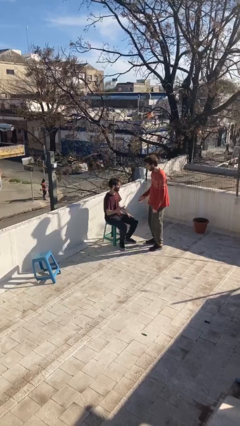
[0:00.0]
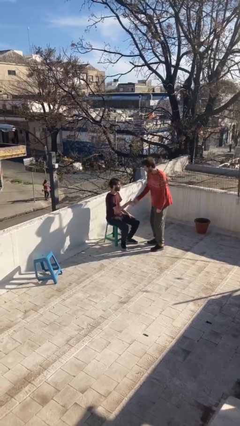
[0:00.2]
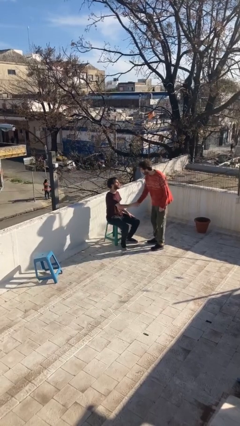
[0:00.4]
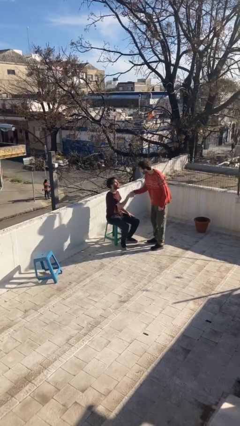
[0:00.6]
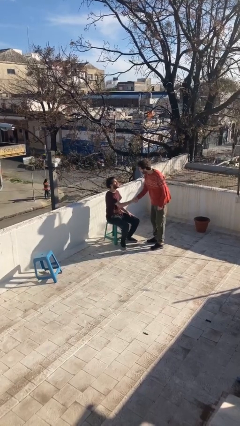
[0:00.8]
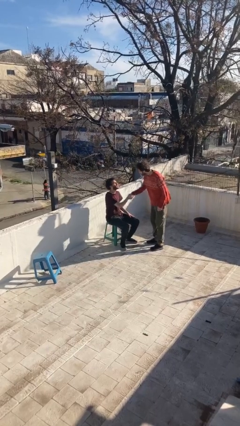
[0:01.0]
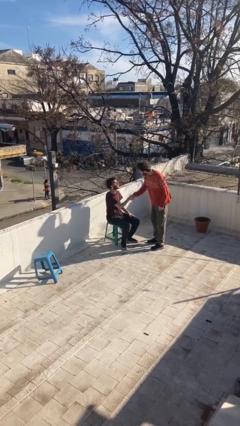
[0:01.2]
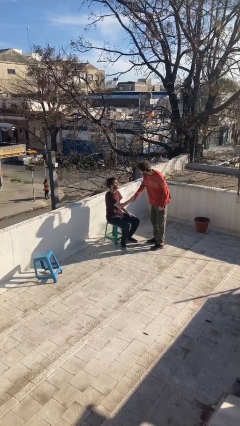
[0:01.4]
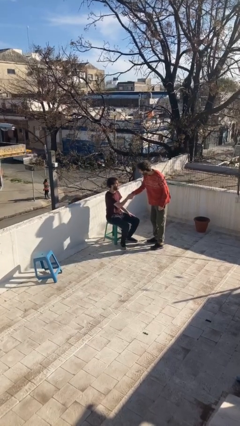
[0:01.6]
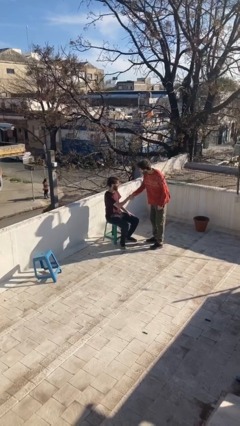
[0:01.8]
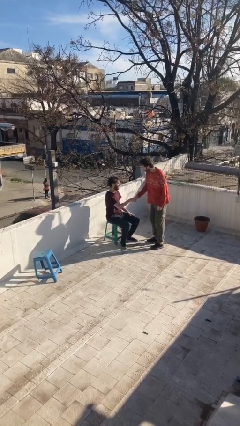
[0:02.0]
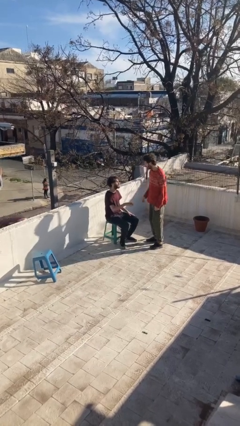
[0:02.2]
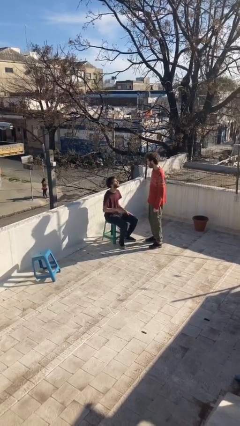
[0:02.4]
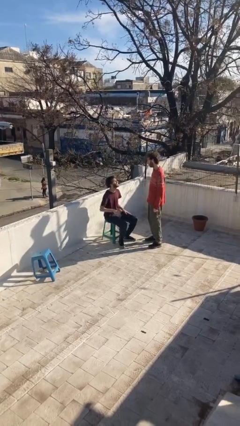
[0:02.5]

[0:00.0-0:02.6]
person shakes hand

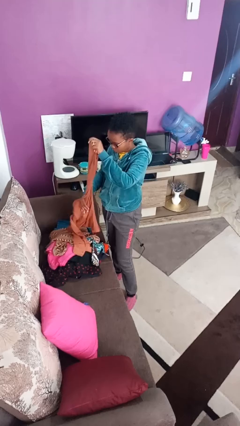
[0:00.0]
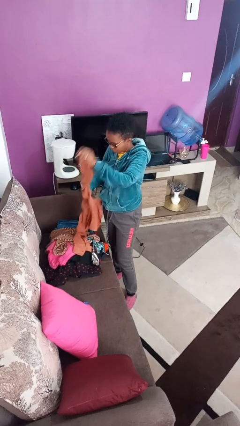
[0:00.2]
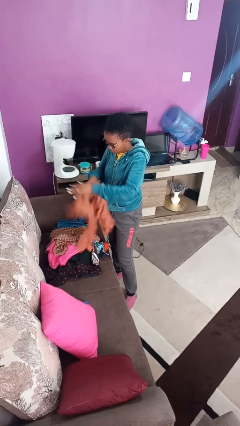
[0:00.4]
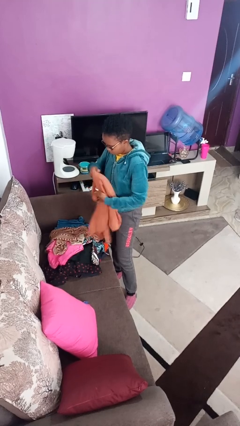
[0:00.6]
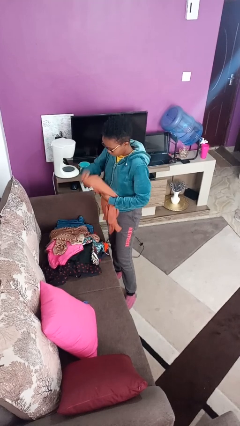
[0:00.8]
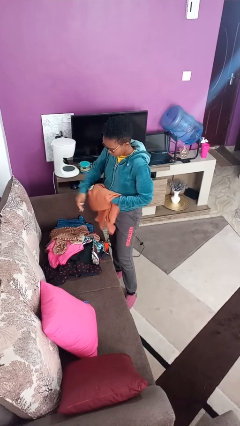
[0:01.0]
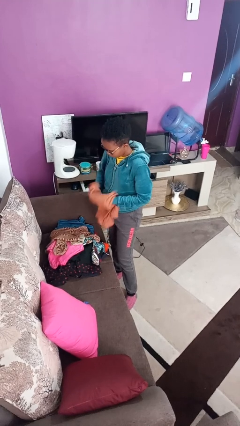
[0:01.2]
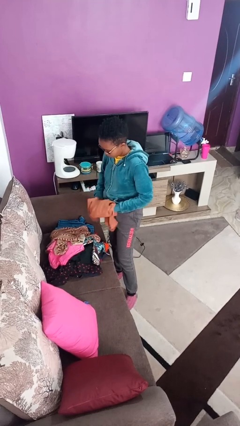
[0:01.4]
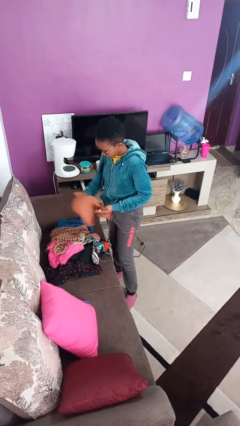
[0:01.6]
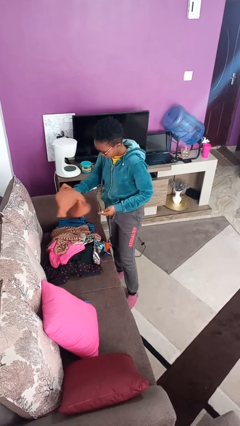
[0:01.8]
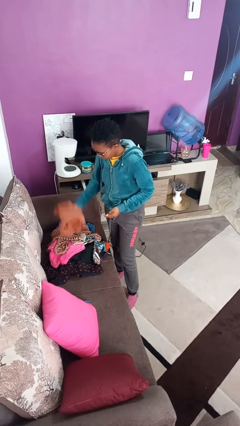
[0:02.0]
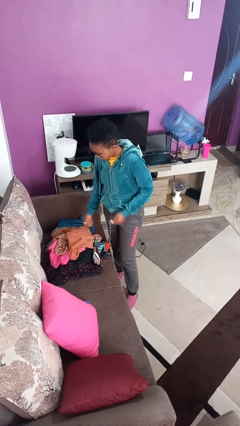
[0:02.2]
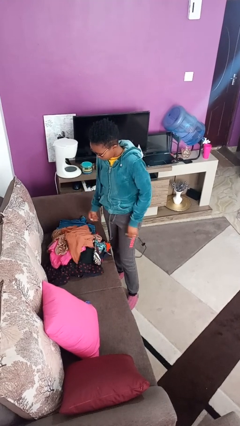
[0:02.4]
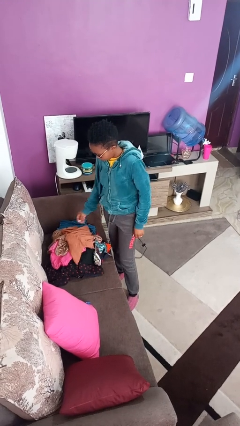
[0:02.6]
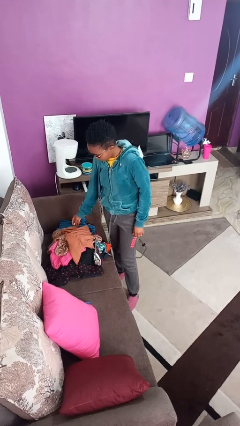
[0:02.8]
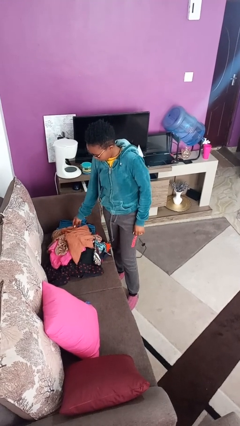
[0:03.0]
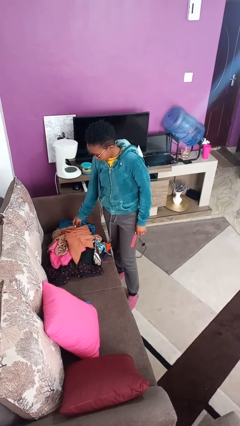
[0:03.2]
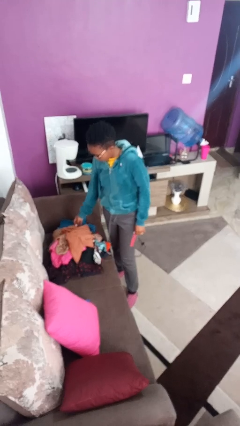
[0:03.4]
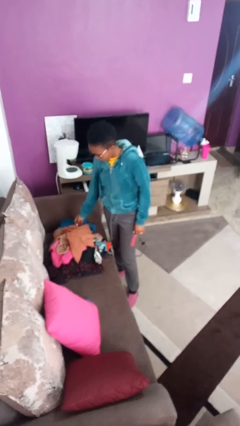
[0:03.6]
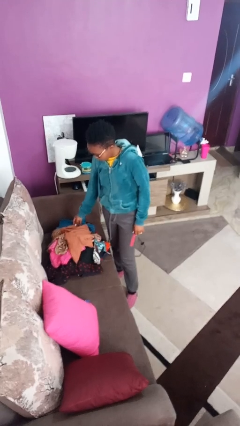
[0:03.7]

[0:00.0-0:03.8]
person folds shirt

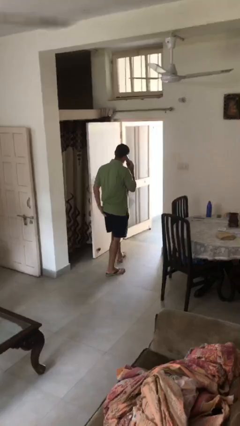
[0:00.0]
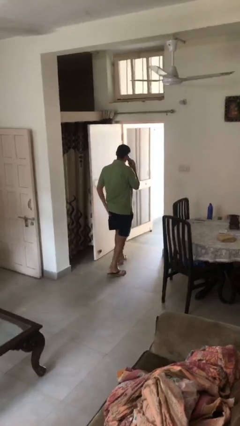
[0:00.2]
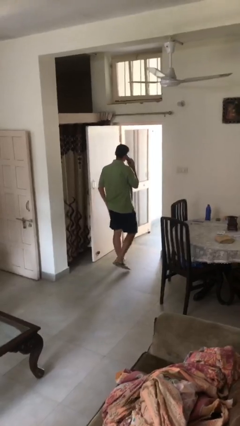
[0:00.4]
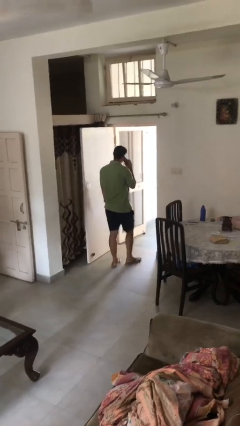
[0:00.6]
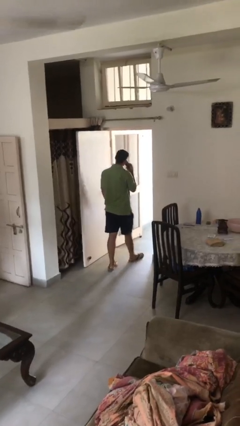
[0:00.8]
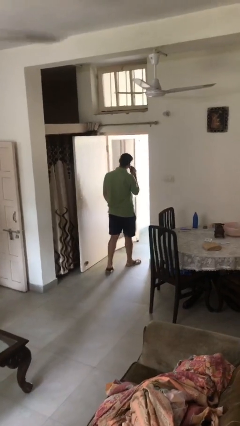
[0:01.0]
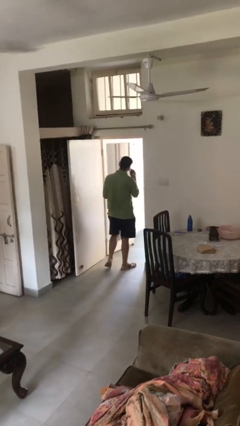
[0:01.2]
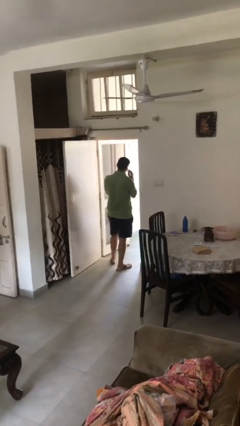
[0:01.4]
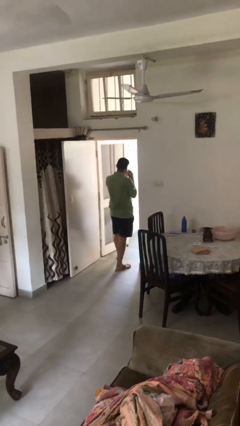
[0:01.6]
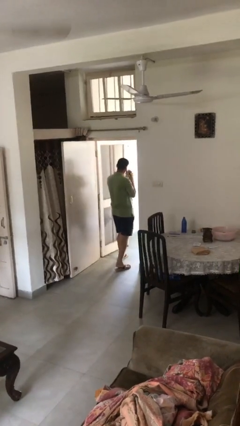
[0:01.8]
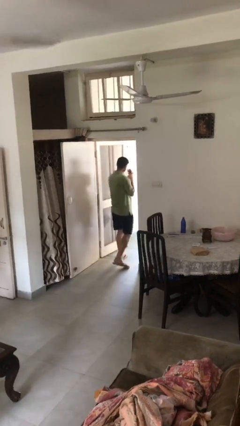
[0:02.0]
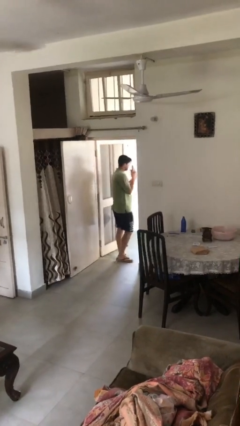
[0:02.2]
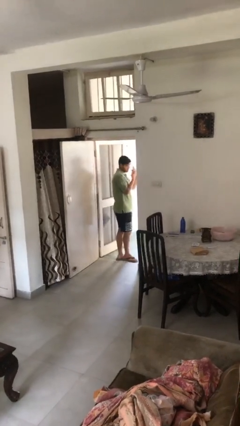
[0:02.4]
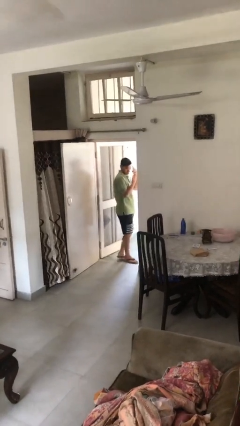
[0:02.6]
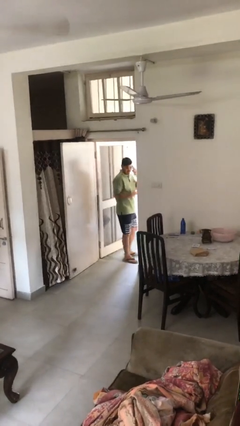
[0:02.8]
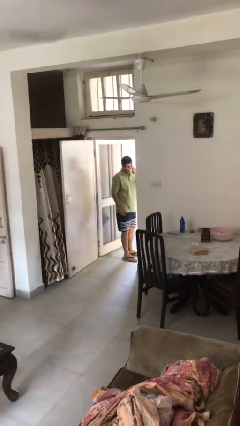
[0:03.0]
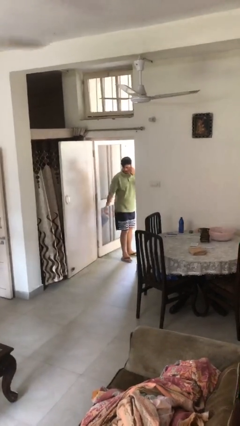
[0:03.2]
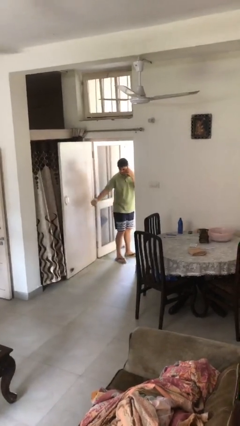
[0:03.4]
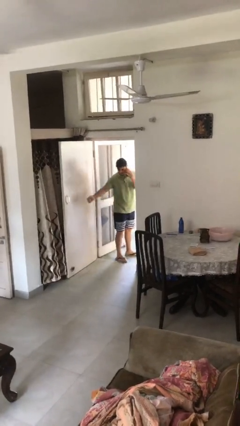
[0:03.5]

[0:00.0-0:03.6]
person exits scene through structure

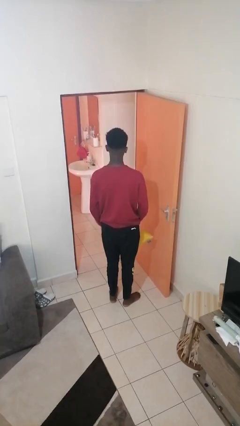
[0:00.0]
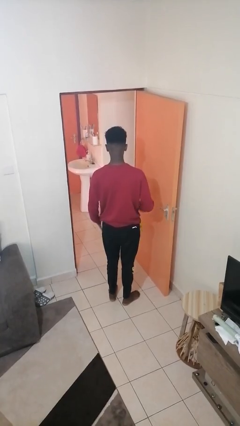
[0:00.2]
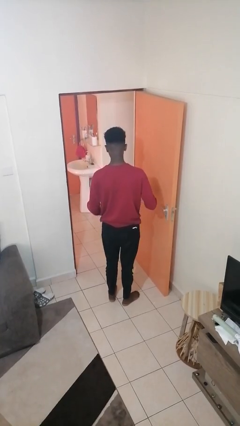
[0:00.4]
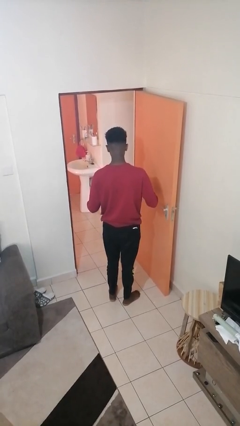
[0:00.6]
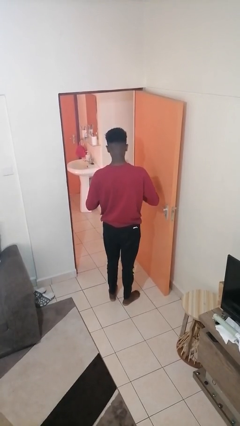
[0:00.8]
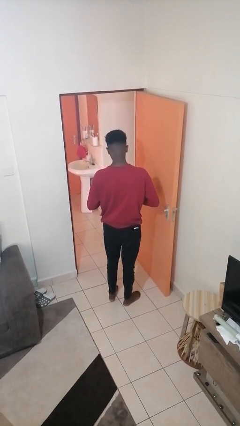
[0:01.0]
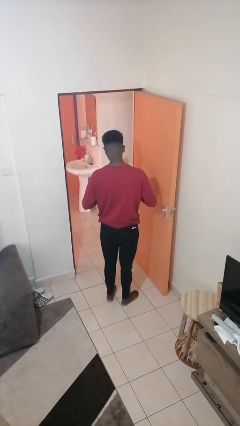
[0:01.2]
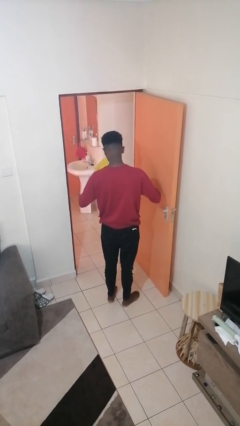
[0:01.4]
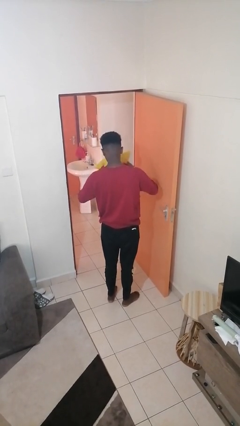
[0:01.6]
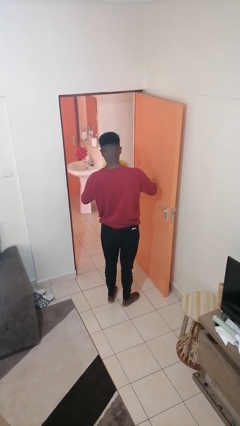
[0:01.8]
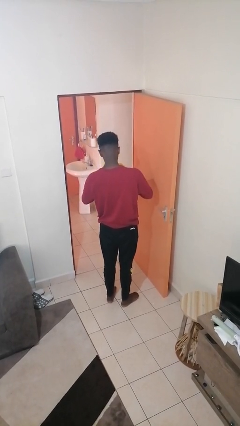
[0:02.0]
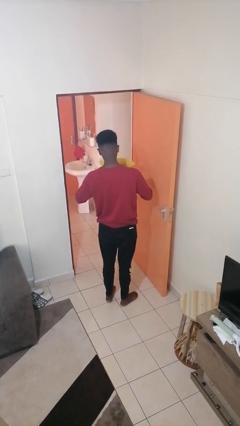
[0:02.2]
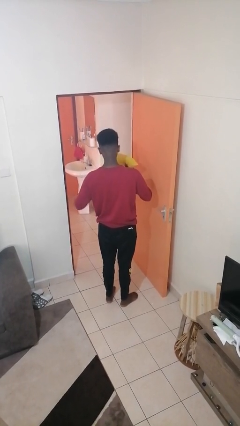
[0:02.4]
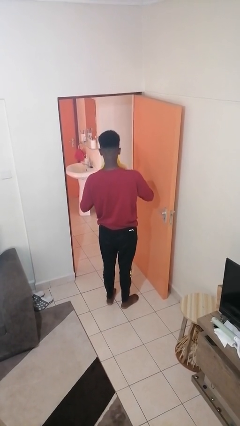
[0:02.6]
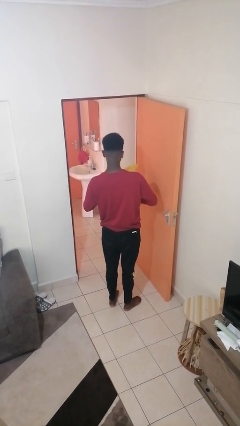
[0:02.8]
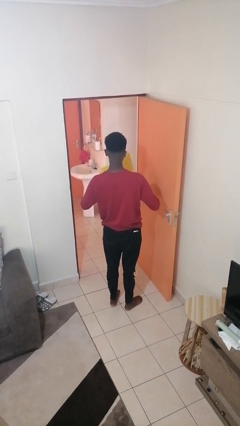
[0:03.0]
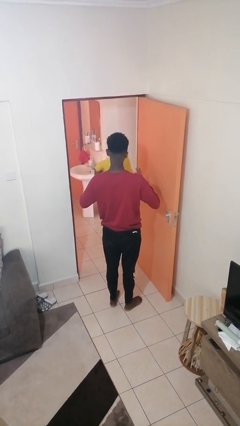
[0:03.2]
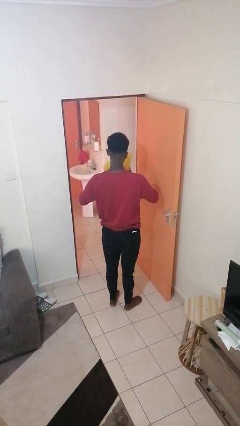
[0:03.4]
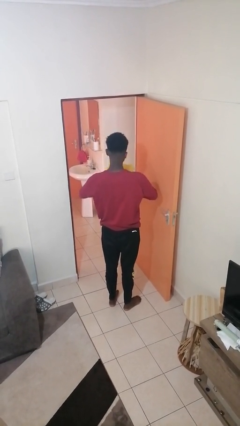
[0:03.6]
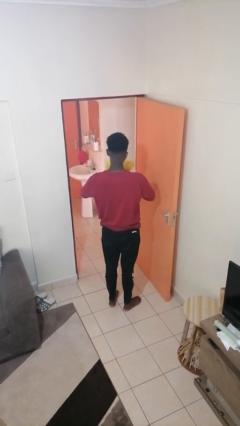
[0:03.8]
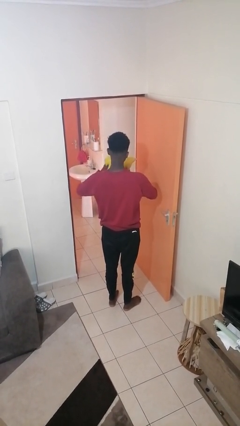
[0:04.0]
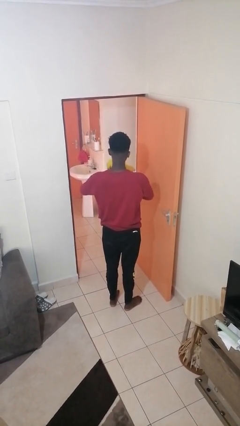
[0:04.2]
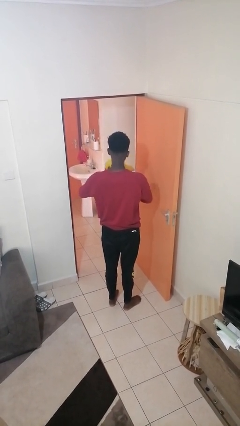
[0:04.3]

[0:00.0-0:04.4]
person squeezes object

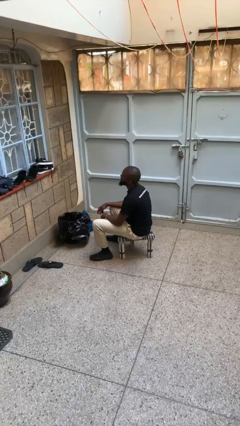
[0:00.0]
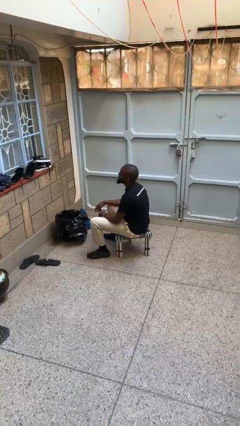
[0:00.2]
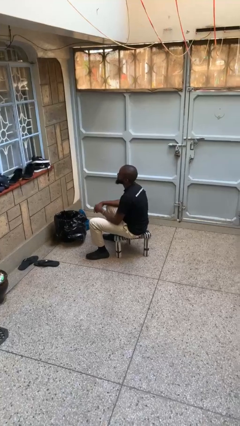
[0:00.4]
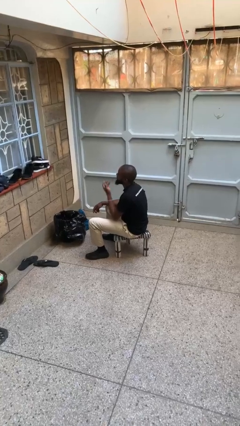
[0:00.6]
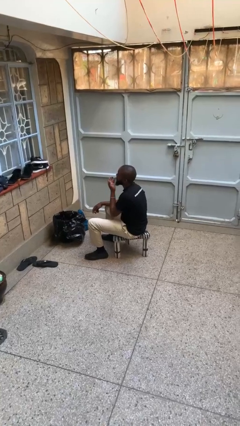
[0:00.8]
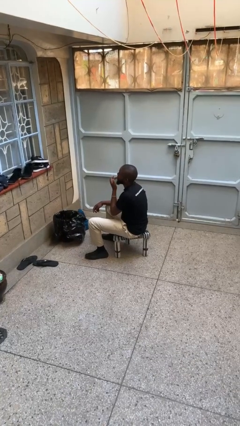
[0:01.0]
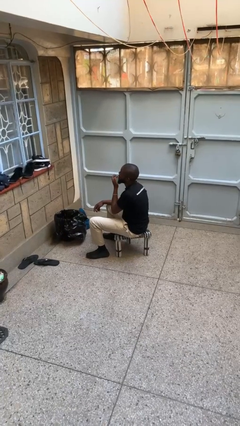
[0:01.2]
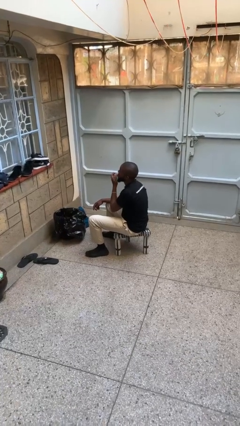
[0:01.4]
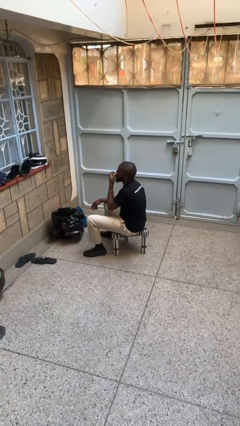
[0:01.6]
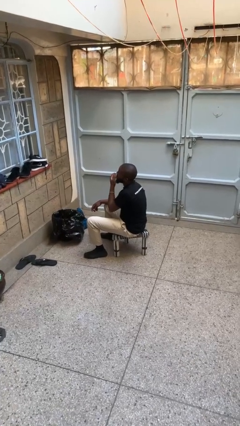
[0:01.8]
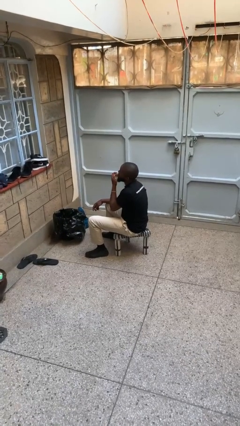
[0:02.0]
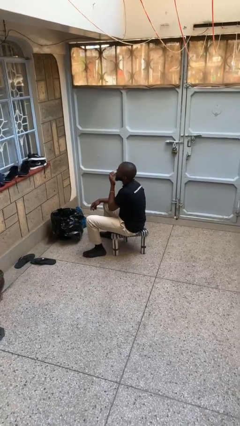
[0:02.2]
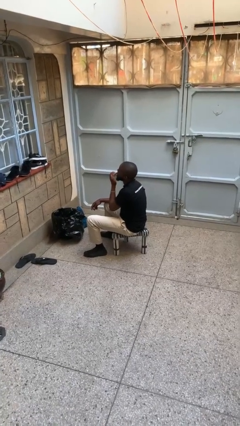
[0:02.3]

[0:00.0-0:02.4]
person licks fingers

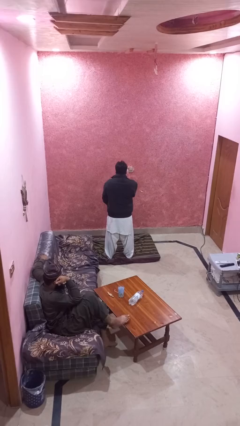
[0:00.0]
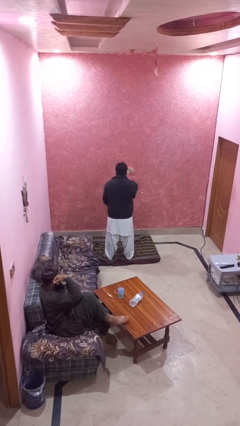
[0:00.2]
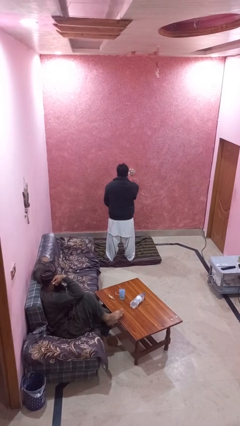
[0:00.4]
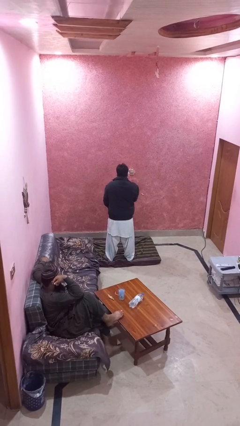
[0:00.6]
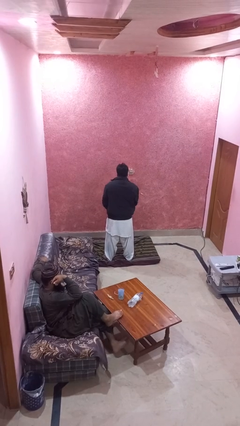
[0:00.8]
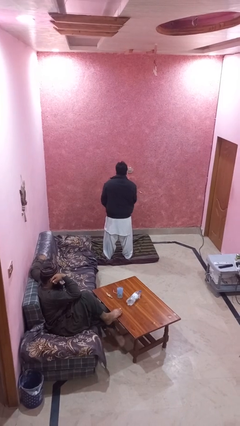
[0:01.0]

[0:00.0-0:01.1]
person unzips jacket
